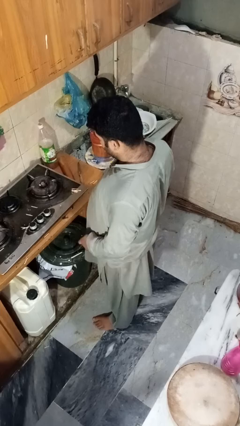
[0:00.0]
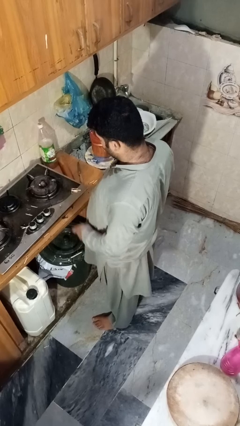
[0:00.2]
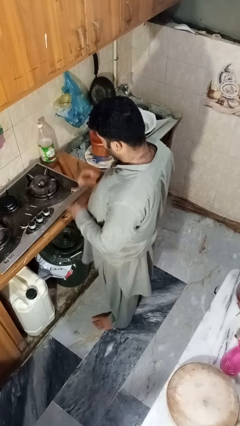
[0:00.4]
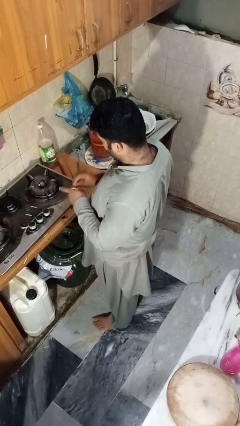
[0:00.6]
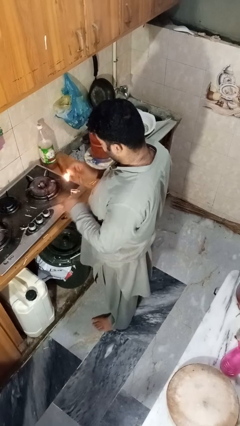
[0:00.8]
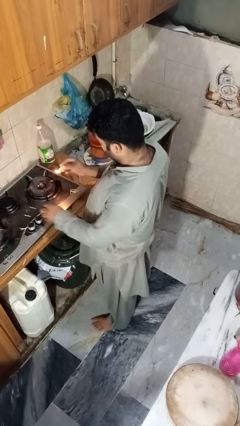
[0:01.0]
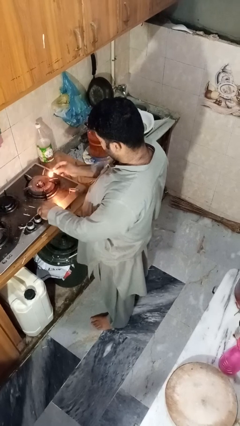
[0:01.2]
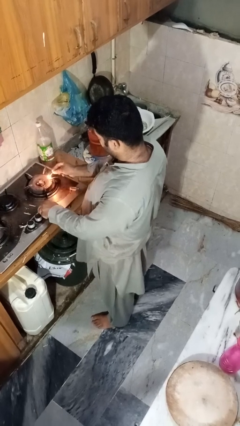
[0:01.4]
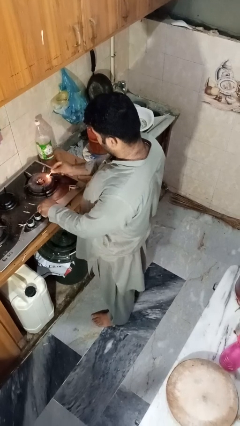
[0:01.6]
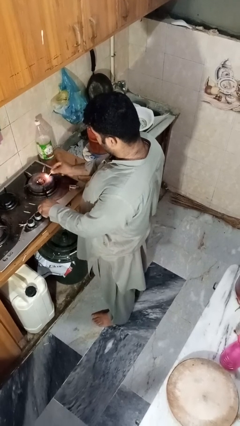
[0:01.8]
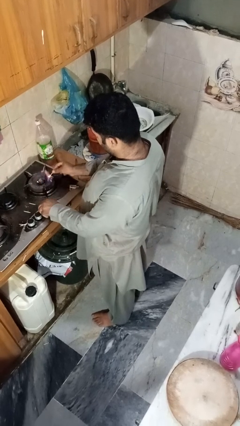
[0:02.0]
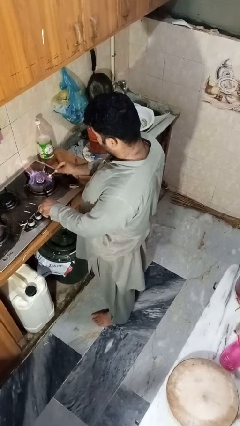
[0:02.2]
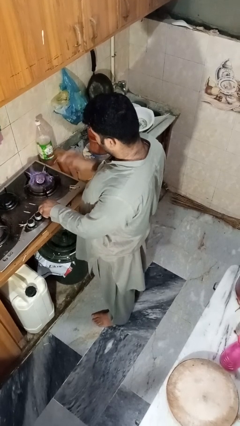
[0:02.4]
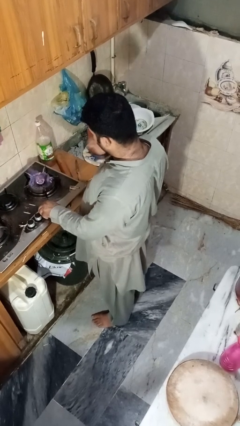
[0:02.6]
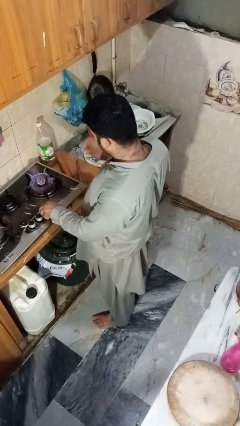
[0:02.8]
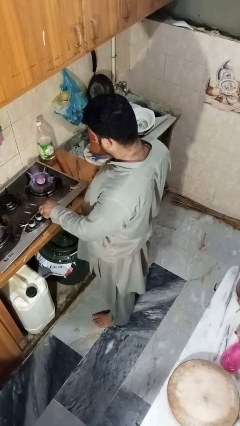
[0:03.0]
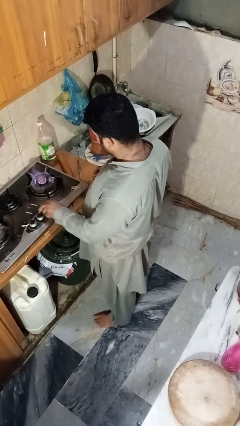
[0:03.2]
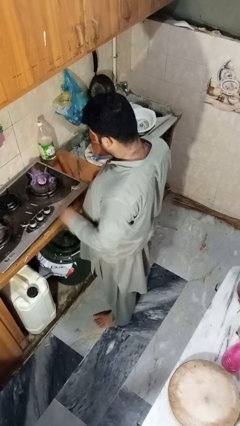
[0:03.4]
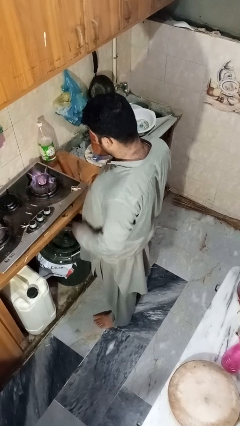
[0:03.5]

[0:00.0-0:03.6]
person turns on stovetop

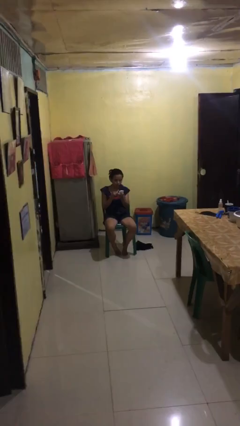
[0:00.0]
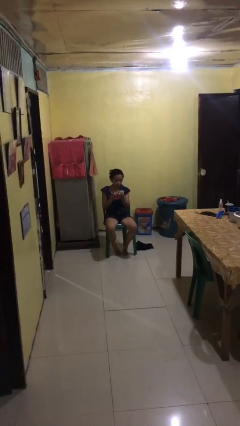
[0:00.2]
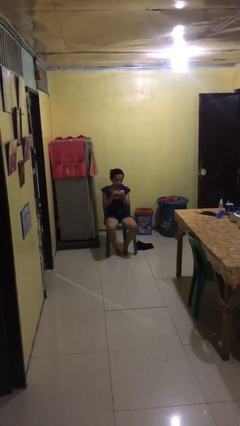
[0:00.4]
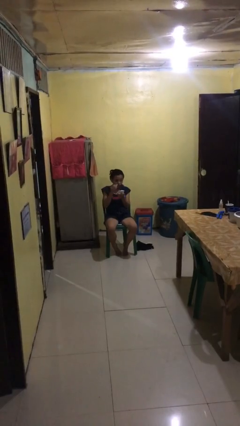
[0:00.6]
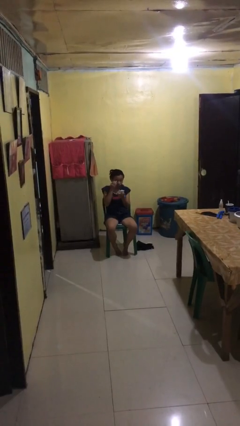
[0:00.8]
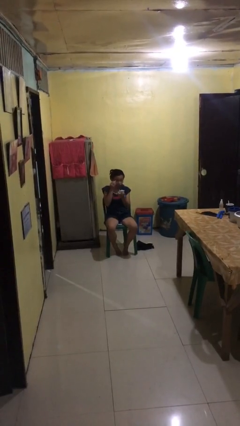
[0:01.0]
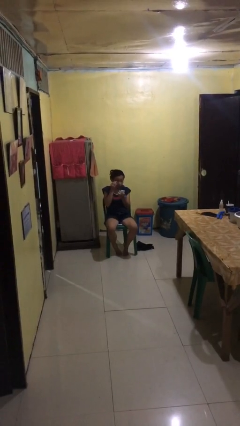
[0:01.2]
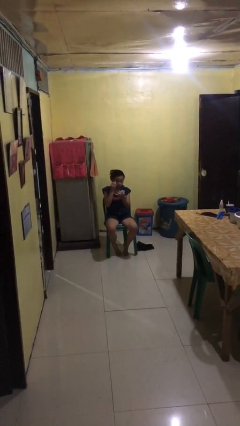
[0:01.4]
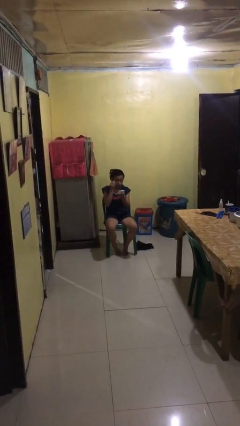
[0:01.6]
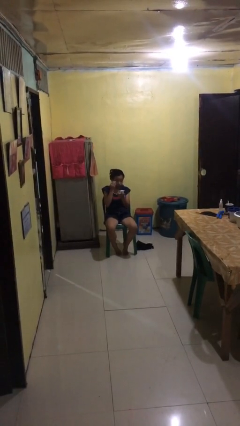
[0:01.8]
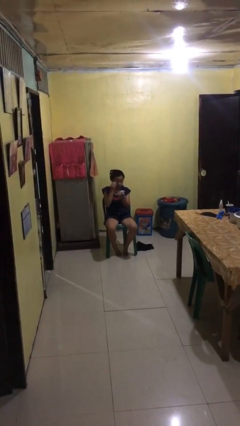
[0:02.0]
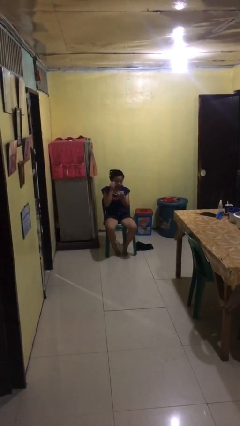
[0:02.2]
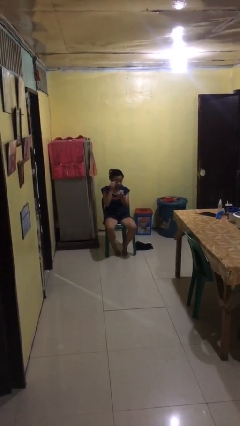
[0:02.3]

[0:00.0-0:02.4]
person applies eye makeup

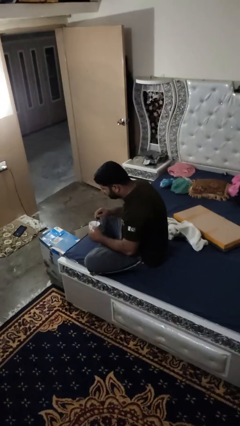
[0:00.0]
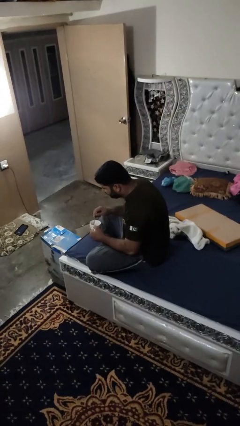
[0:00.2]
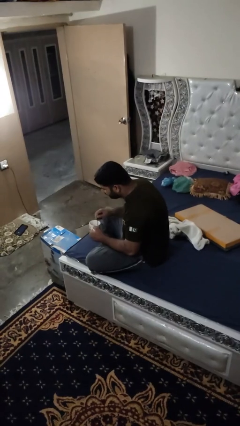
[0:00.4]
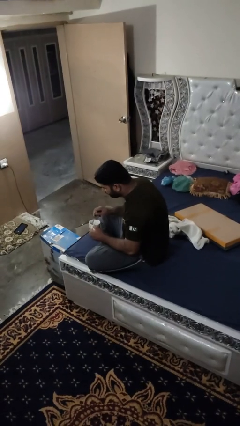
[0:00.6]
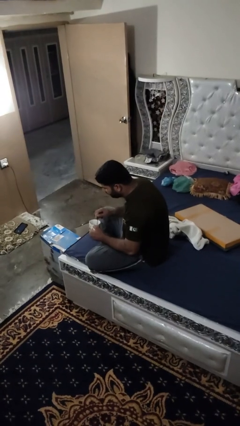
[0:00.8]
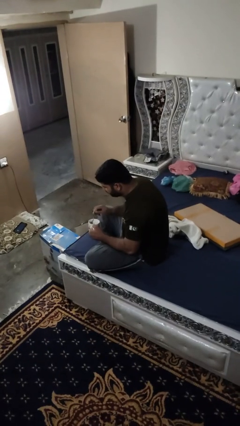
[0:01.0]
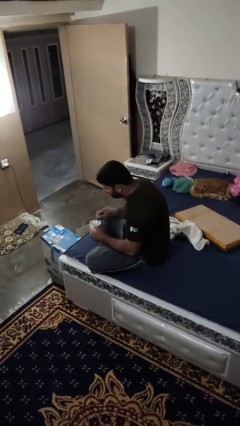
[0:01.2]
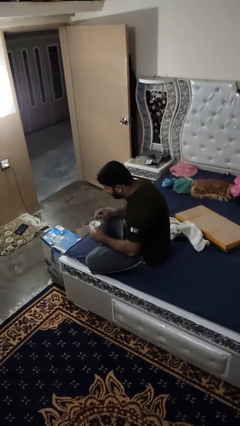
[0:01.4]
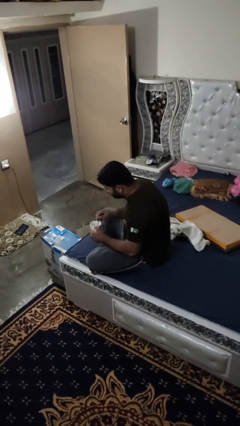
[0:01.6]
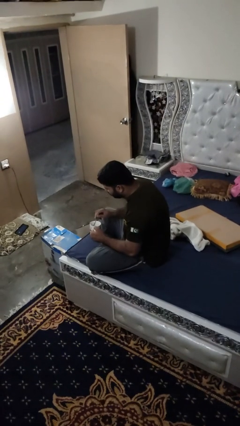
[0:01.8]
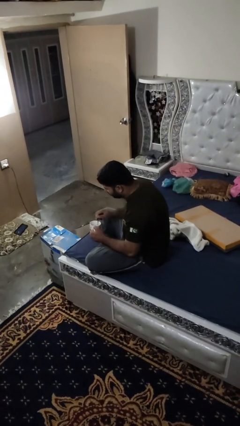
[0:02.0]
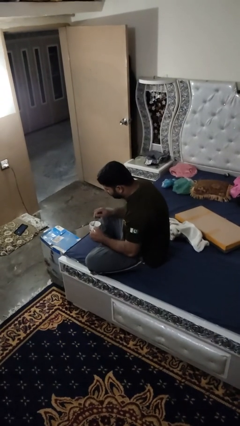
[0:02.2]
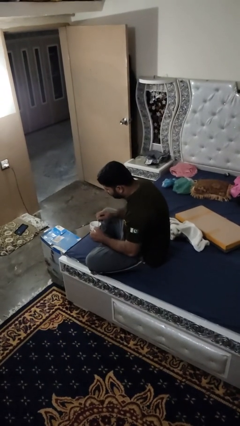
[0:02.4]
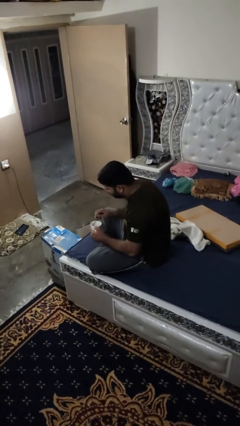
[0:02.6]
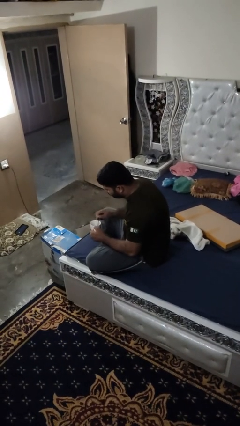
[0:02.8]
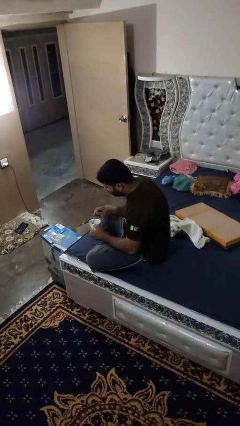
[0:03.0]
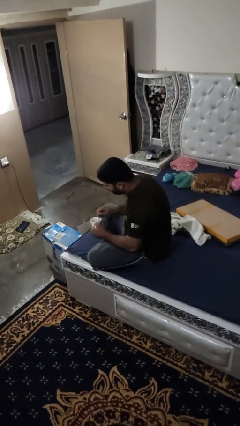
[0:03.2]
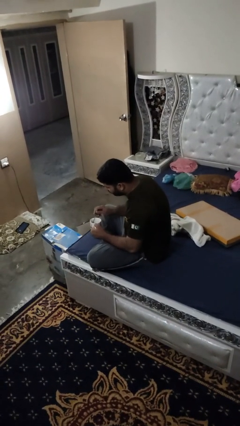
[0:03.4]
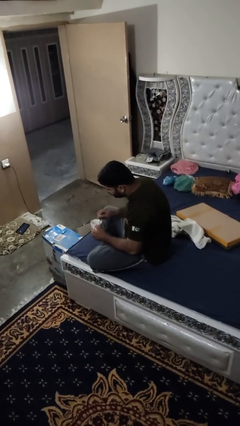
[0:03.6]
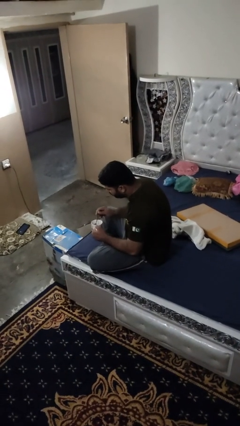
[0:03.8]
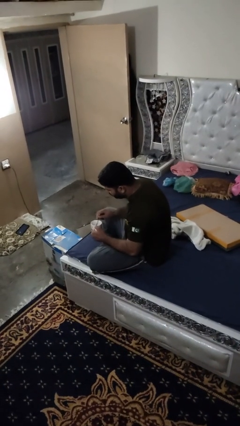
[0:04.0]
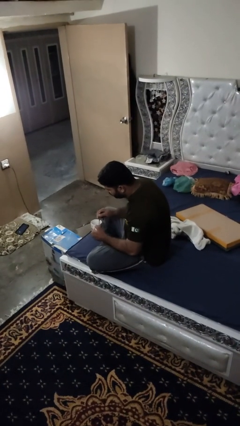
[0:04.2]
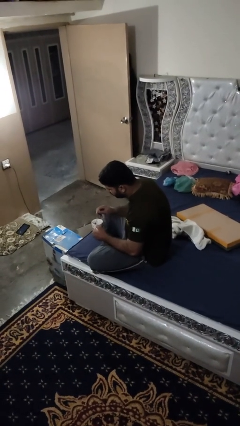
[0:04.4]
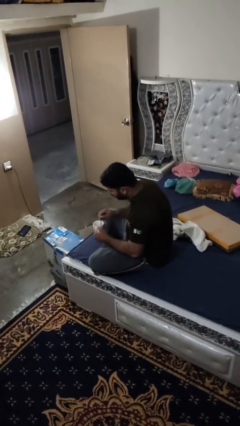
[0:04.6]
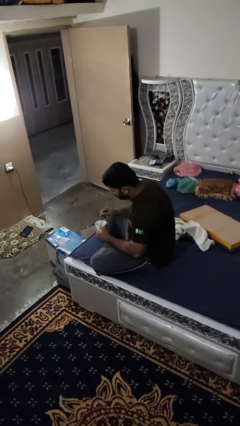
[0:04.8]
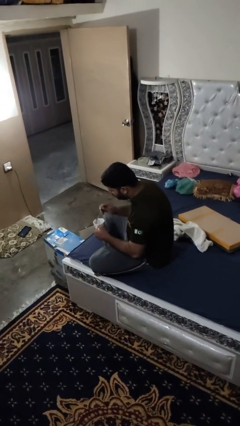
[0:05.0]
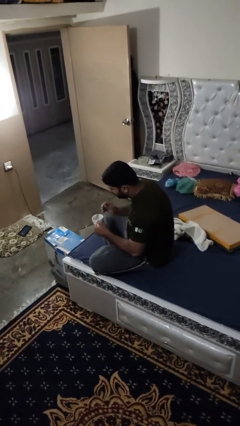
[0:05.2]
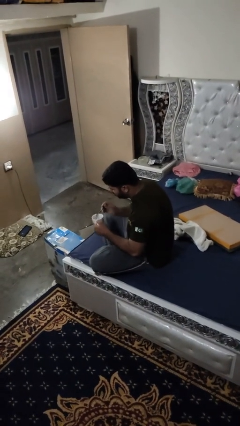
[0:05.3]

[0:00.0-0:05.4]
person stirs mug

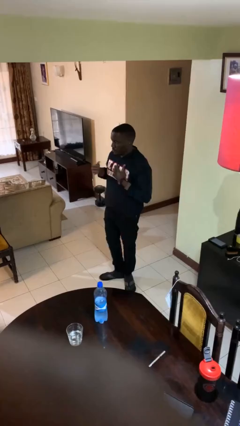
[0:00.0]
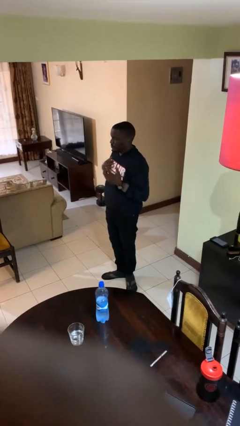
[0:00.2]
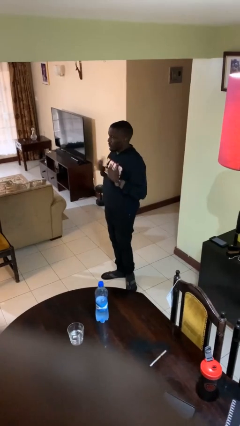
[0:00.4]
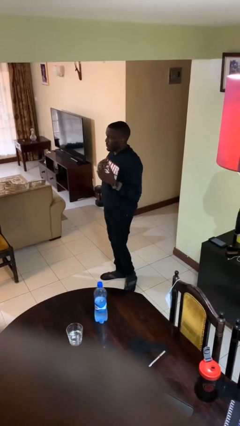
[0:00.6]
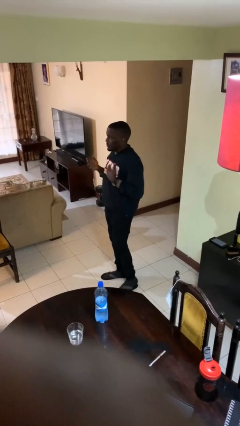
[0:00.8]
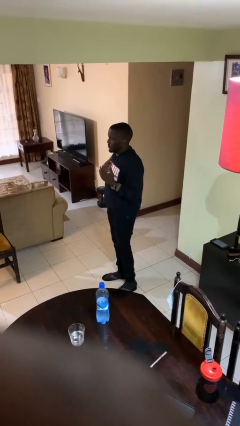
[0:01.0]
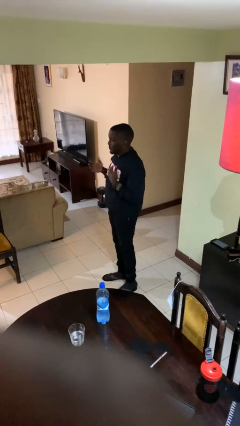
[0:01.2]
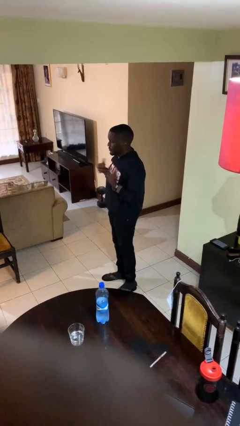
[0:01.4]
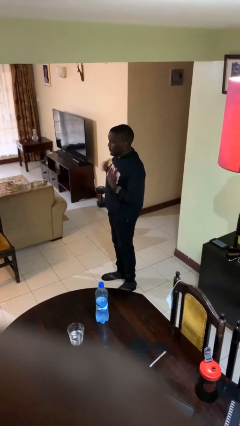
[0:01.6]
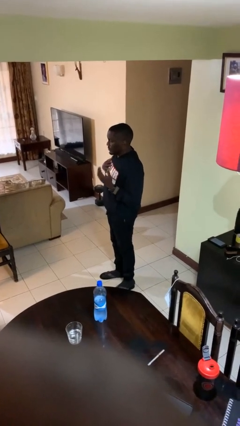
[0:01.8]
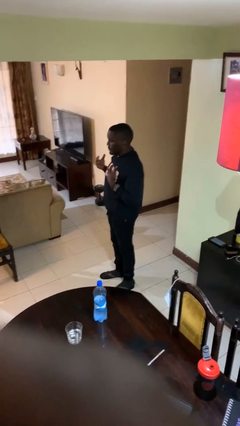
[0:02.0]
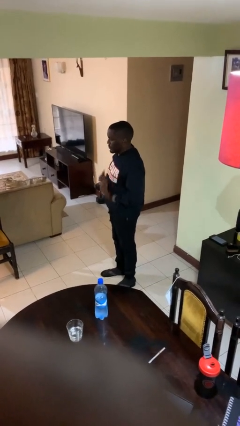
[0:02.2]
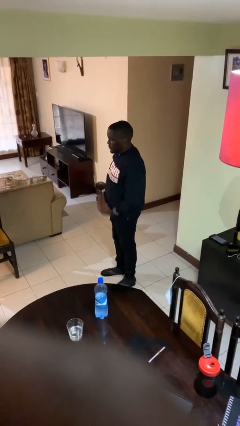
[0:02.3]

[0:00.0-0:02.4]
person drums on chest

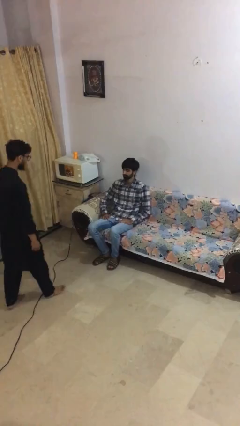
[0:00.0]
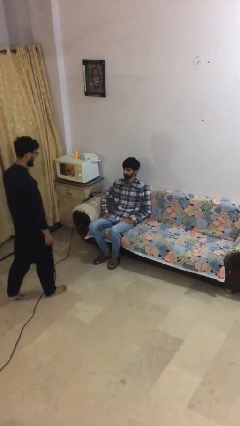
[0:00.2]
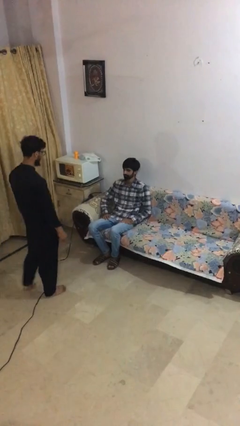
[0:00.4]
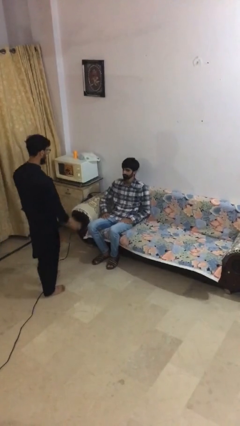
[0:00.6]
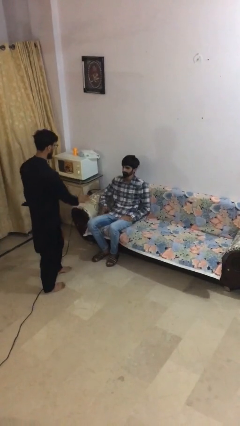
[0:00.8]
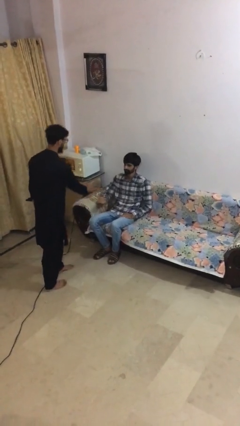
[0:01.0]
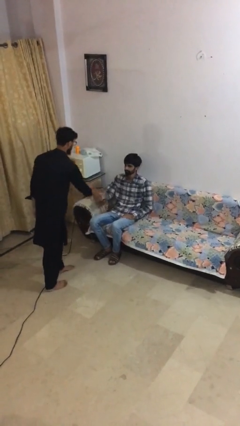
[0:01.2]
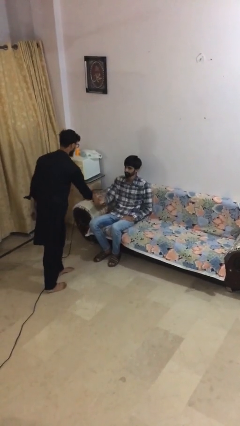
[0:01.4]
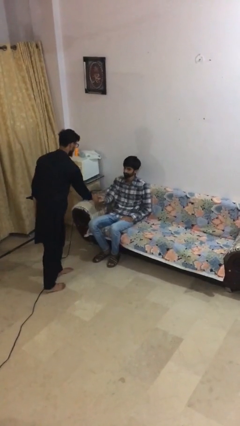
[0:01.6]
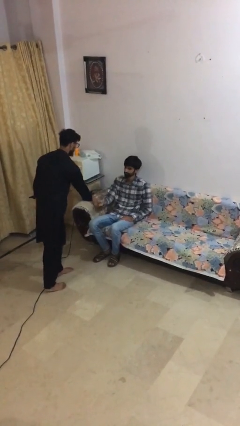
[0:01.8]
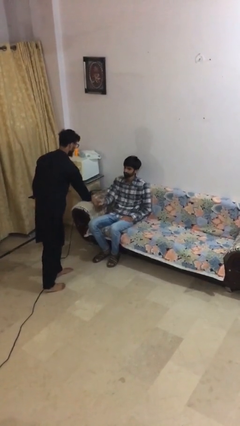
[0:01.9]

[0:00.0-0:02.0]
person shakes hand

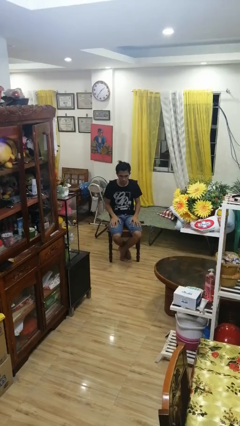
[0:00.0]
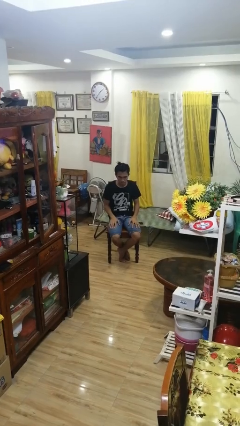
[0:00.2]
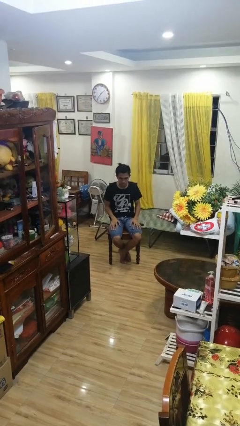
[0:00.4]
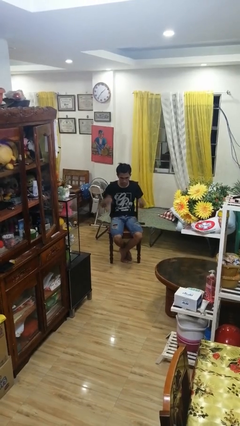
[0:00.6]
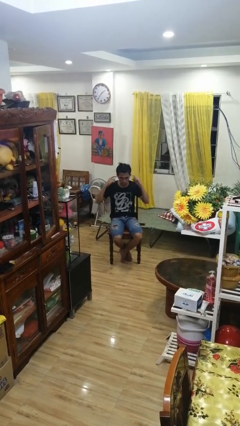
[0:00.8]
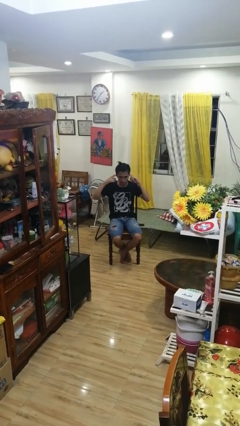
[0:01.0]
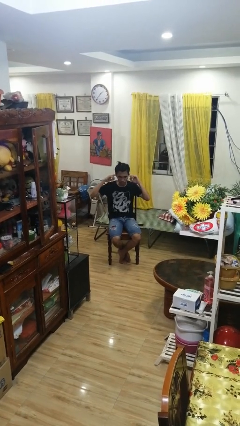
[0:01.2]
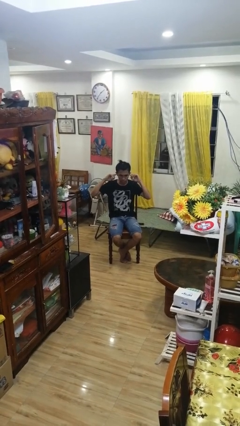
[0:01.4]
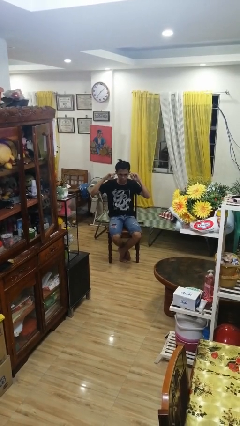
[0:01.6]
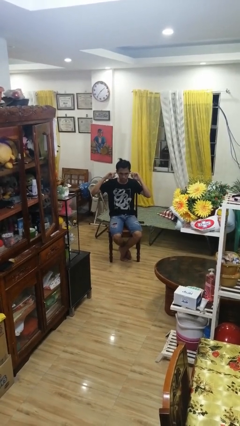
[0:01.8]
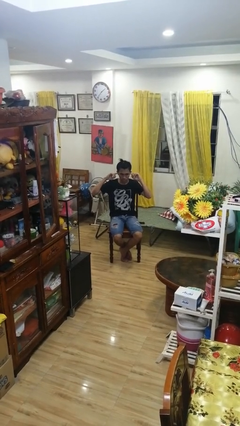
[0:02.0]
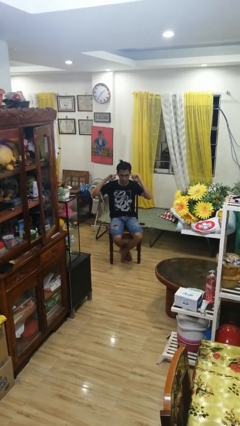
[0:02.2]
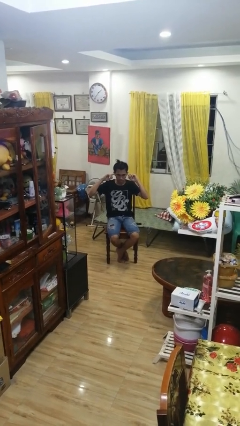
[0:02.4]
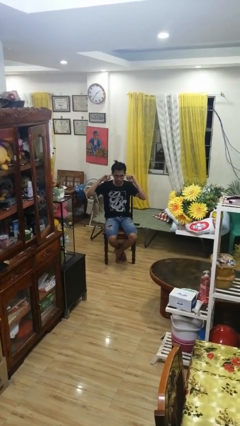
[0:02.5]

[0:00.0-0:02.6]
person puts fingers in ear
